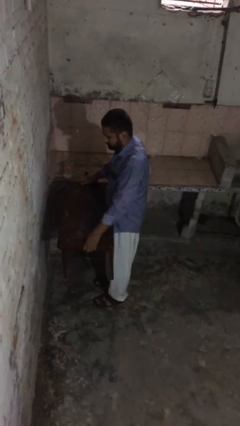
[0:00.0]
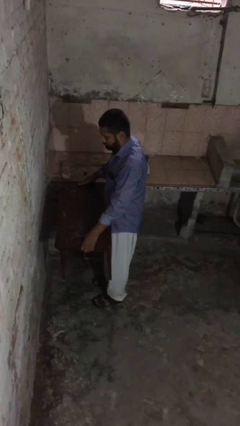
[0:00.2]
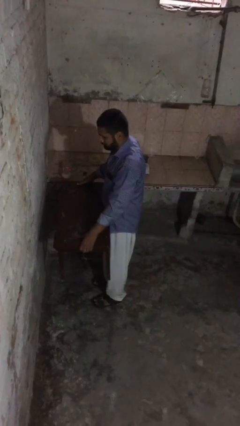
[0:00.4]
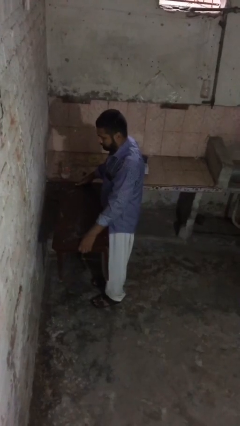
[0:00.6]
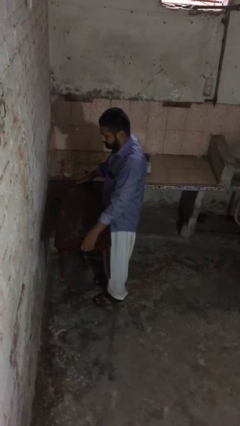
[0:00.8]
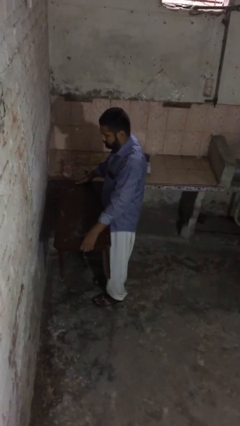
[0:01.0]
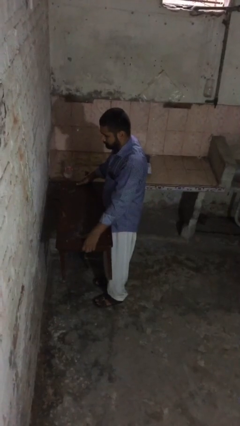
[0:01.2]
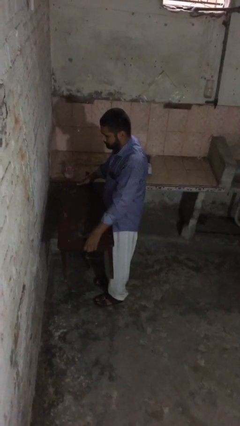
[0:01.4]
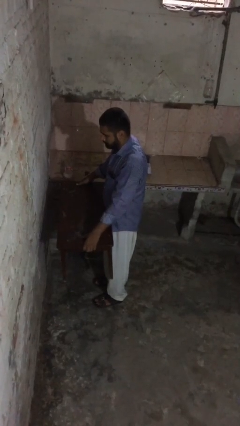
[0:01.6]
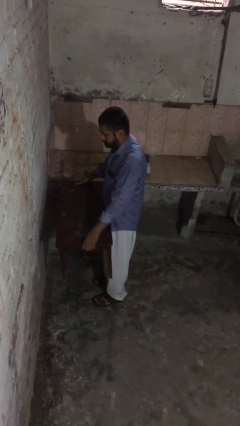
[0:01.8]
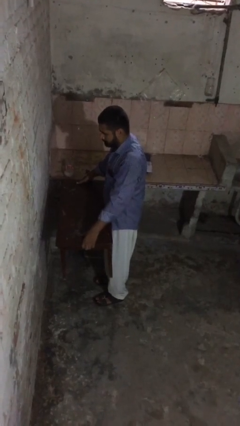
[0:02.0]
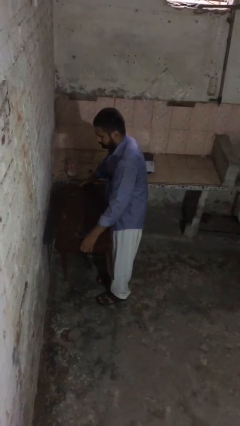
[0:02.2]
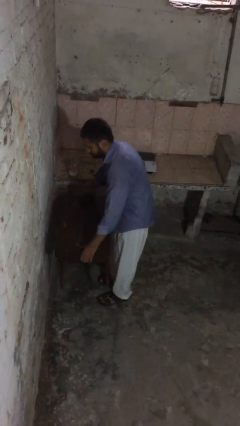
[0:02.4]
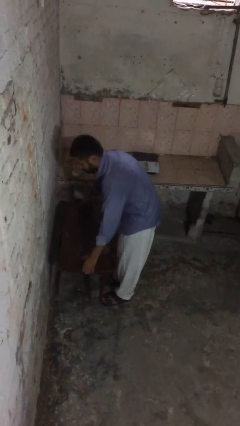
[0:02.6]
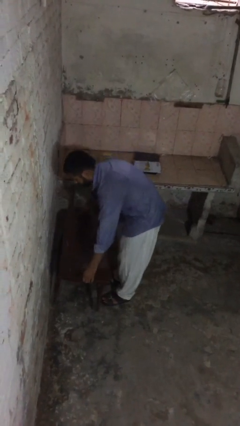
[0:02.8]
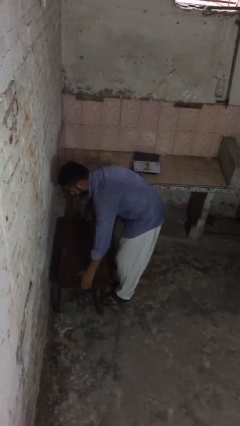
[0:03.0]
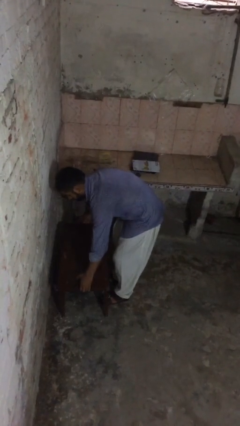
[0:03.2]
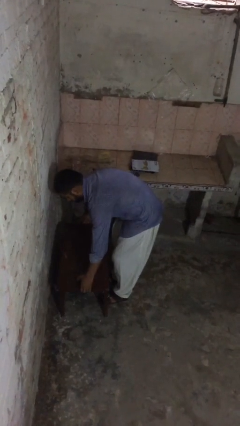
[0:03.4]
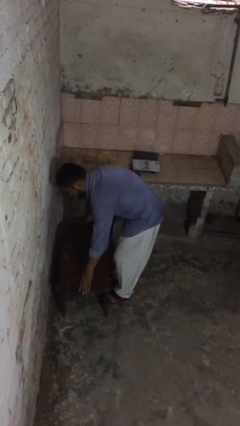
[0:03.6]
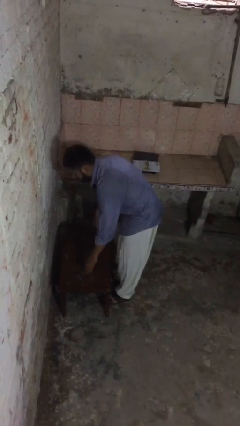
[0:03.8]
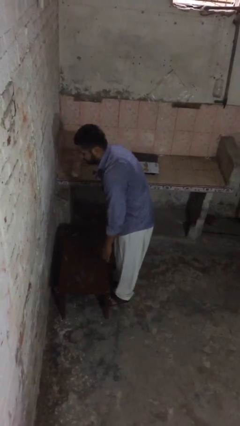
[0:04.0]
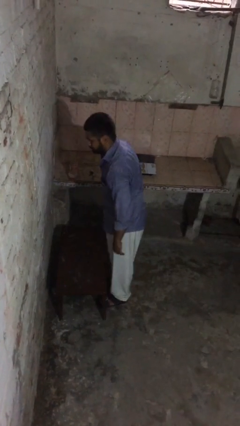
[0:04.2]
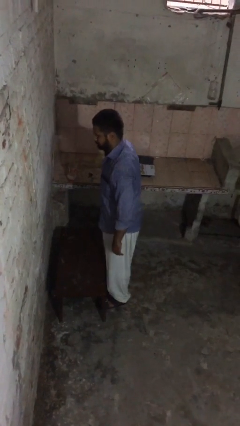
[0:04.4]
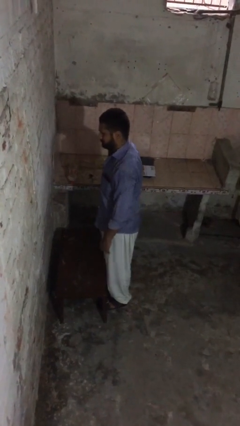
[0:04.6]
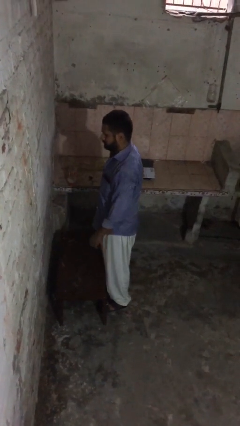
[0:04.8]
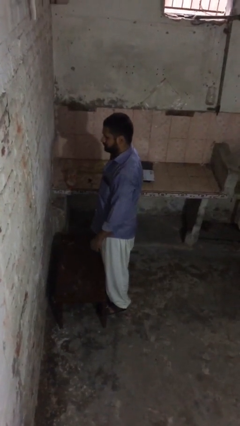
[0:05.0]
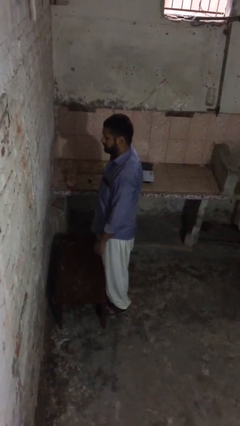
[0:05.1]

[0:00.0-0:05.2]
person puts down object on floor

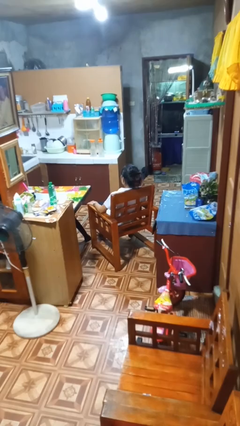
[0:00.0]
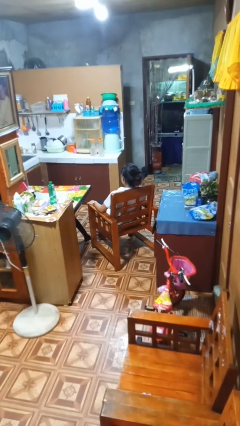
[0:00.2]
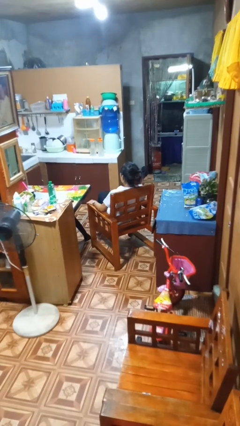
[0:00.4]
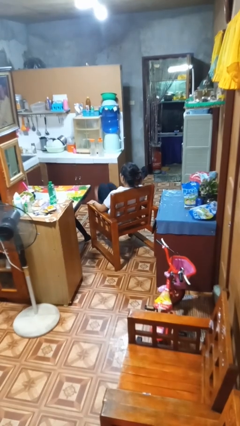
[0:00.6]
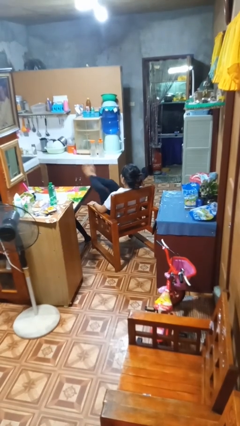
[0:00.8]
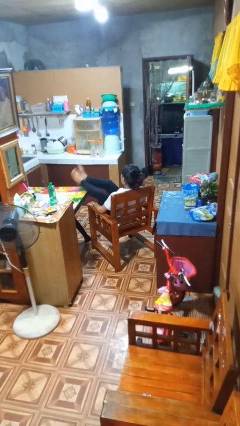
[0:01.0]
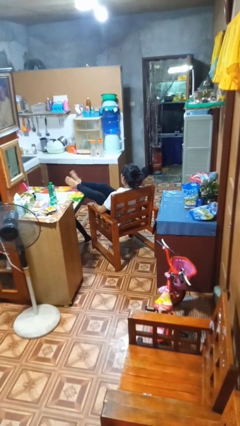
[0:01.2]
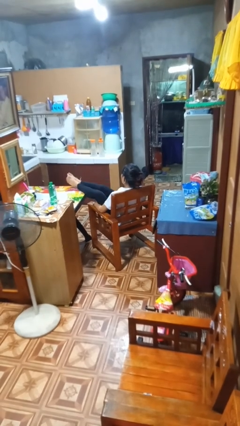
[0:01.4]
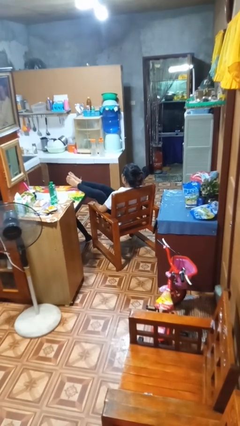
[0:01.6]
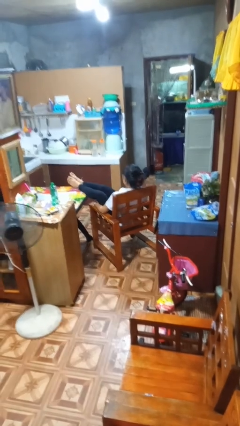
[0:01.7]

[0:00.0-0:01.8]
person puts feet up

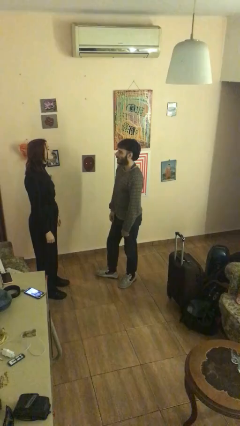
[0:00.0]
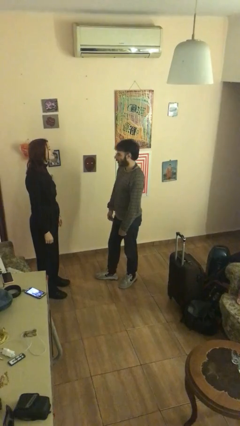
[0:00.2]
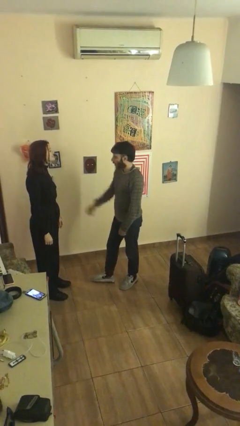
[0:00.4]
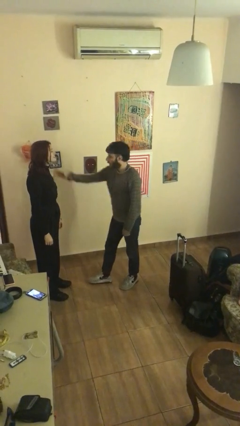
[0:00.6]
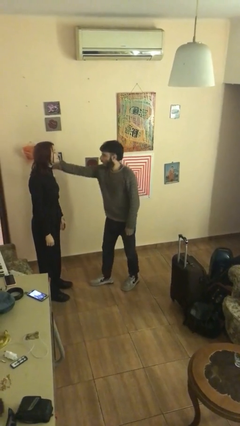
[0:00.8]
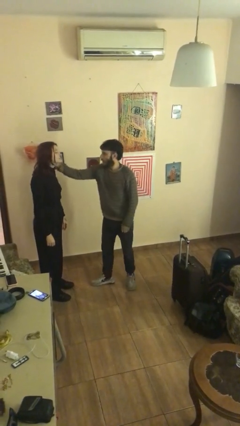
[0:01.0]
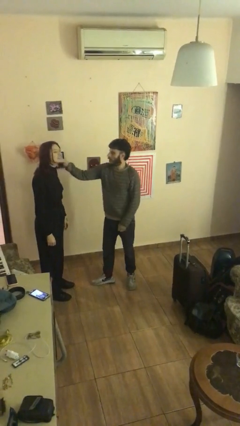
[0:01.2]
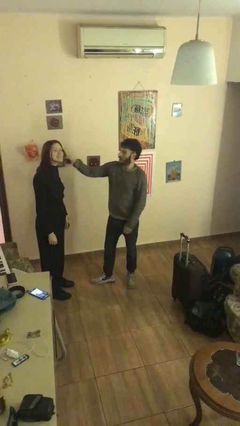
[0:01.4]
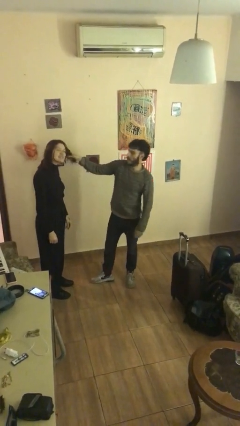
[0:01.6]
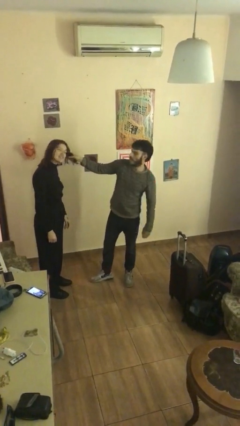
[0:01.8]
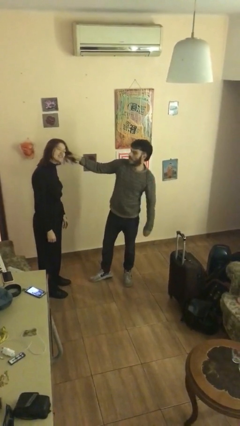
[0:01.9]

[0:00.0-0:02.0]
person grabs person by hair

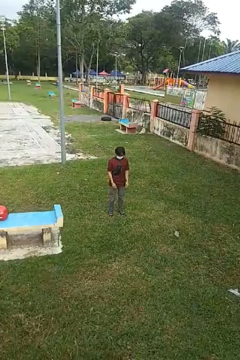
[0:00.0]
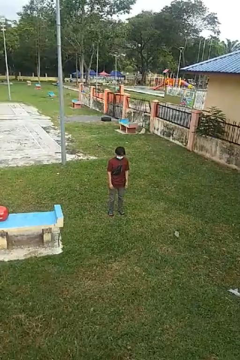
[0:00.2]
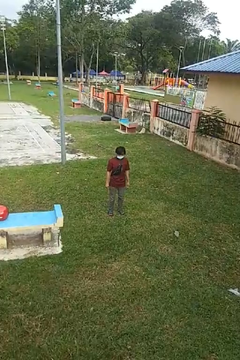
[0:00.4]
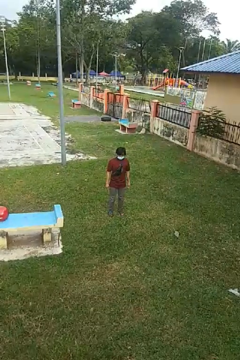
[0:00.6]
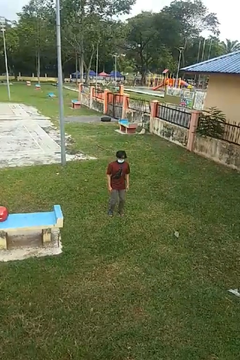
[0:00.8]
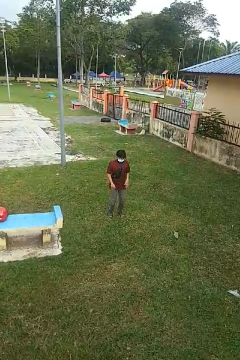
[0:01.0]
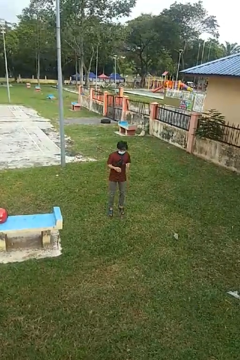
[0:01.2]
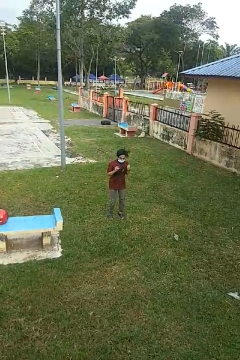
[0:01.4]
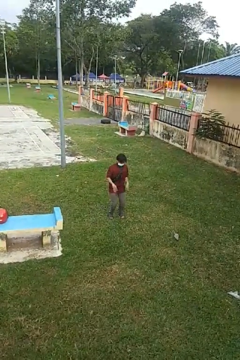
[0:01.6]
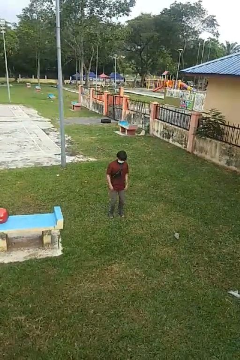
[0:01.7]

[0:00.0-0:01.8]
person jumps

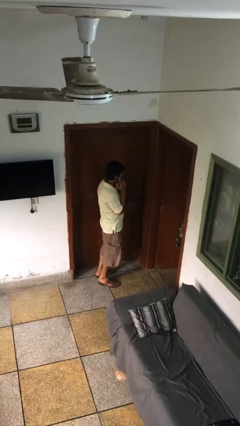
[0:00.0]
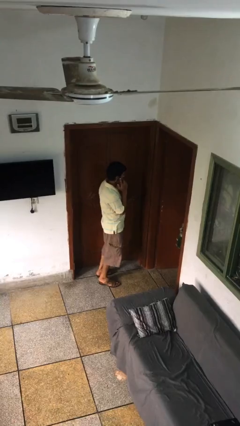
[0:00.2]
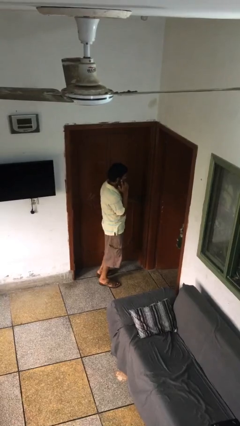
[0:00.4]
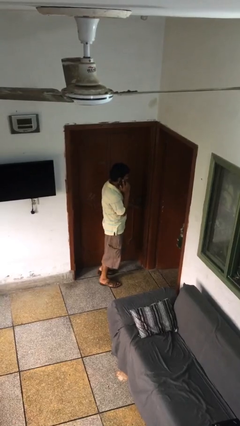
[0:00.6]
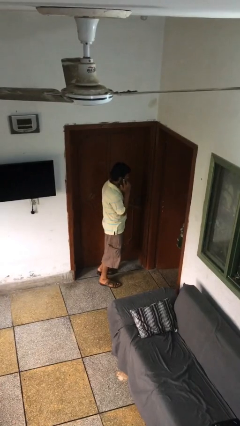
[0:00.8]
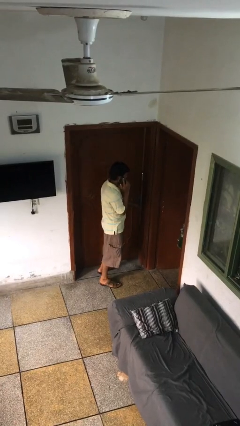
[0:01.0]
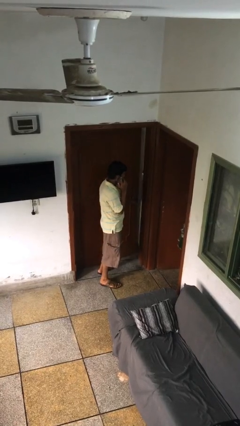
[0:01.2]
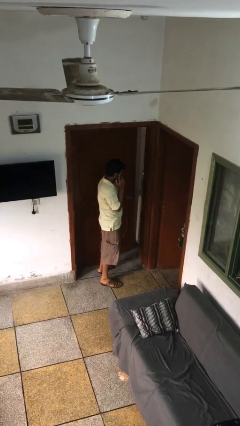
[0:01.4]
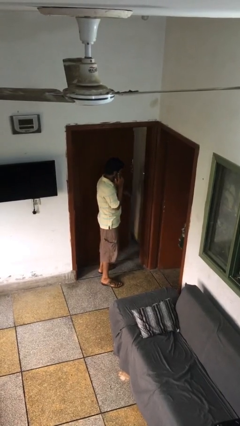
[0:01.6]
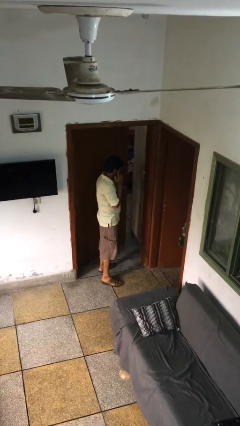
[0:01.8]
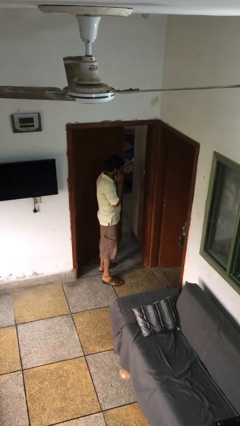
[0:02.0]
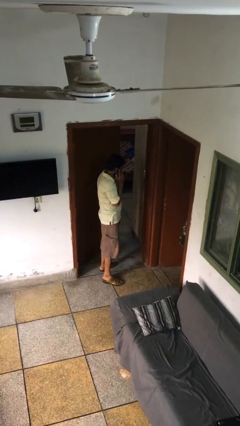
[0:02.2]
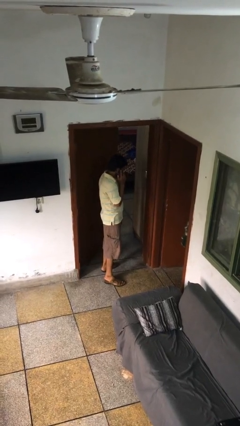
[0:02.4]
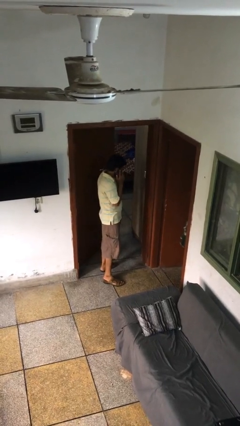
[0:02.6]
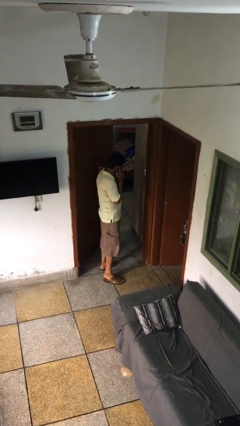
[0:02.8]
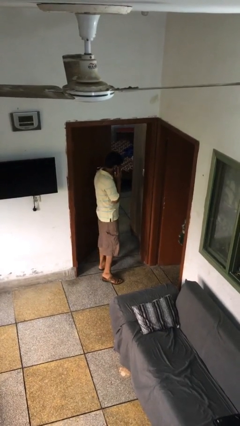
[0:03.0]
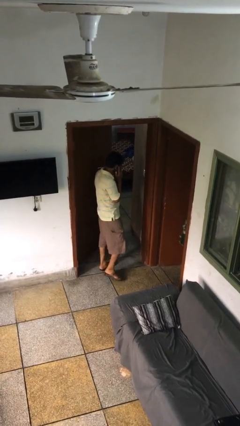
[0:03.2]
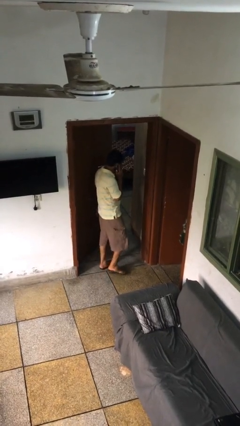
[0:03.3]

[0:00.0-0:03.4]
person opens facility door

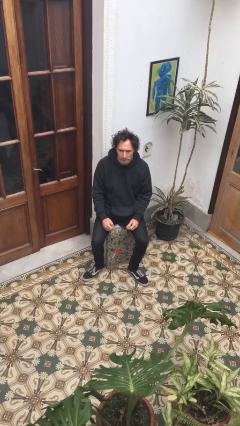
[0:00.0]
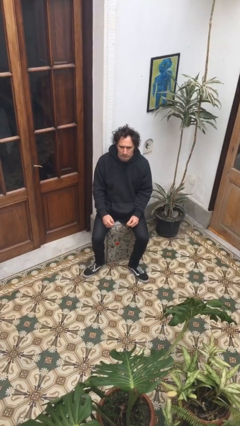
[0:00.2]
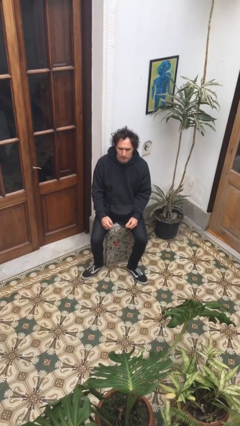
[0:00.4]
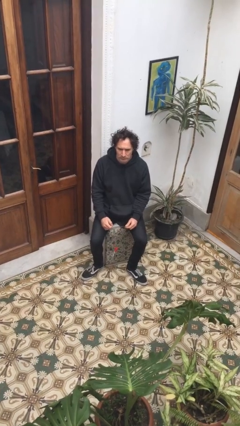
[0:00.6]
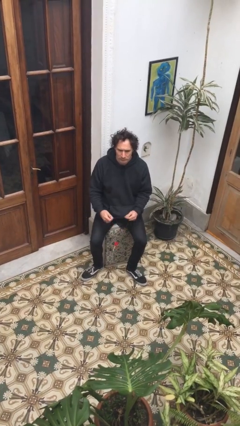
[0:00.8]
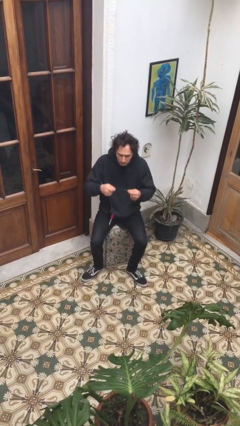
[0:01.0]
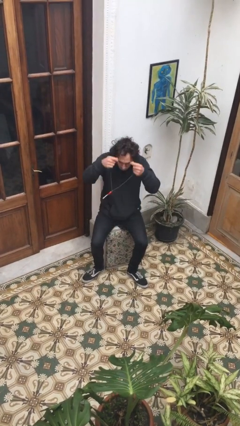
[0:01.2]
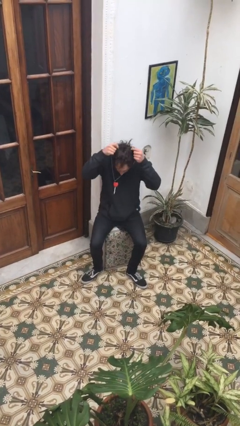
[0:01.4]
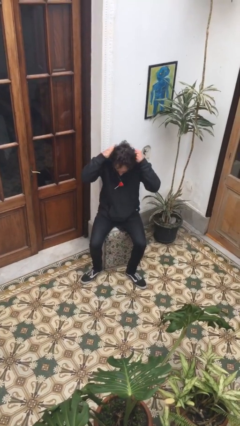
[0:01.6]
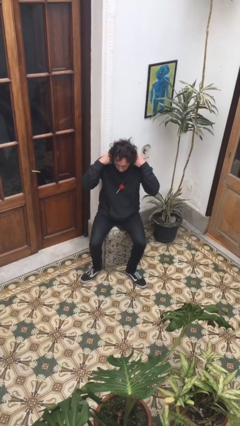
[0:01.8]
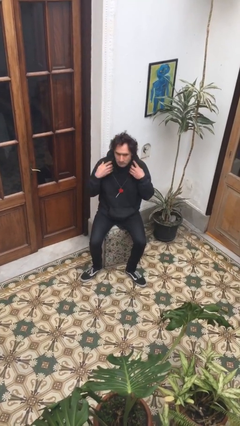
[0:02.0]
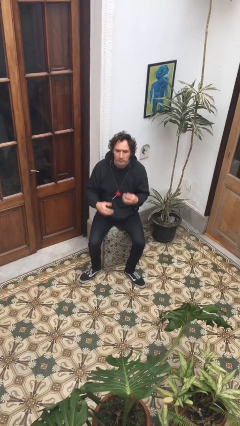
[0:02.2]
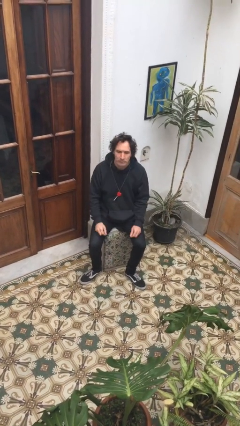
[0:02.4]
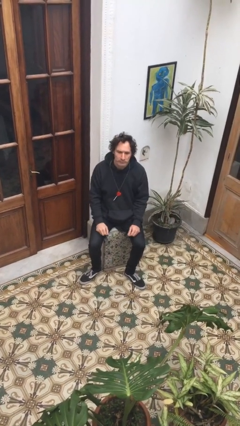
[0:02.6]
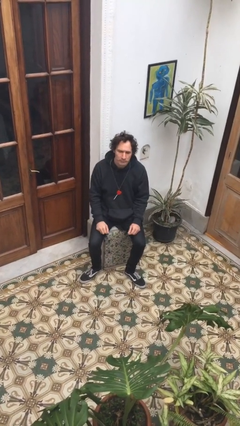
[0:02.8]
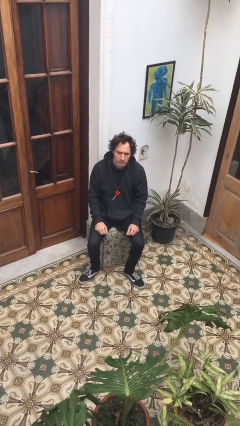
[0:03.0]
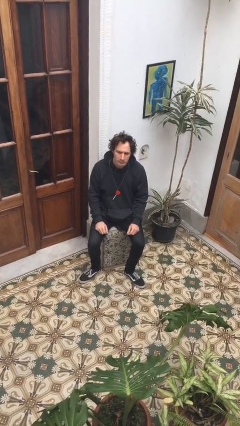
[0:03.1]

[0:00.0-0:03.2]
person puts on necklace

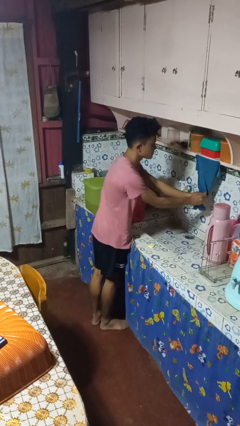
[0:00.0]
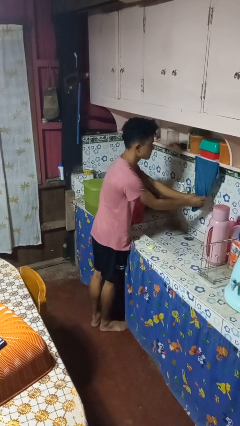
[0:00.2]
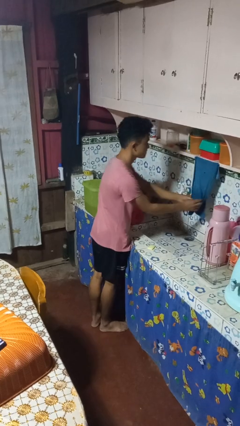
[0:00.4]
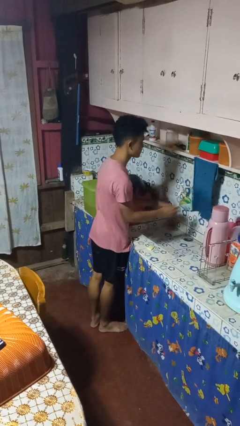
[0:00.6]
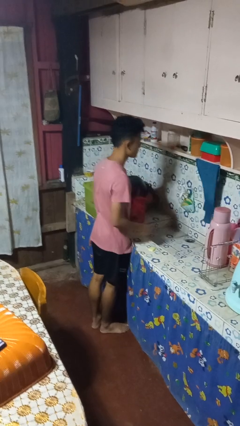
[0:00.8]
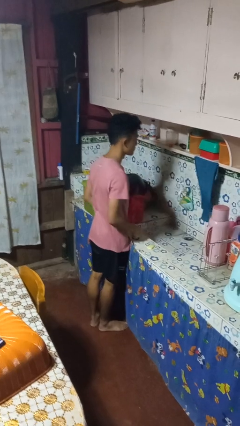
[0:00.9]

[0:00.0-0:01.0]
person dries hands with towel
